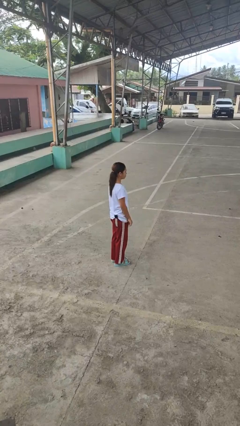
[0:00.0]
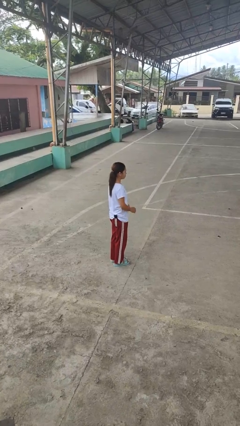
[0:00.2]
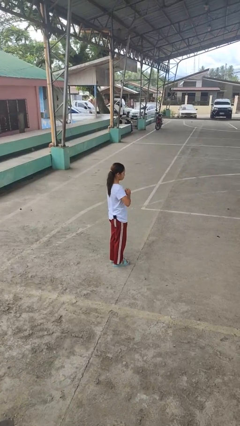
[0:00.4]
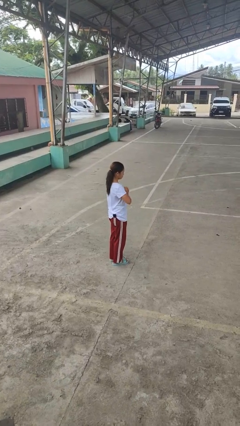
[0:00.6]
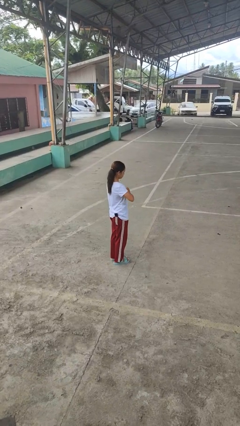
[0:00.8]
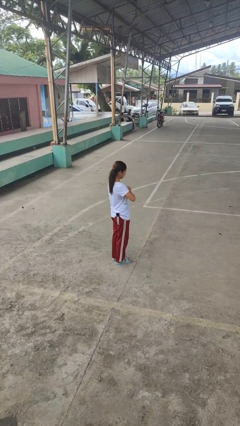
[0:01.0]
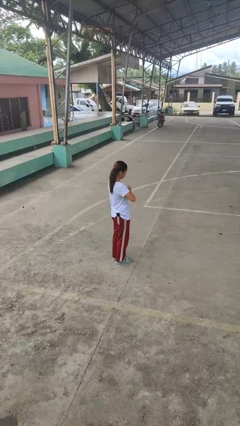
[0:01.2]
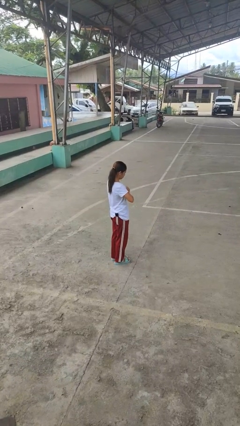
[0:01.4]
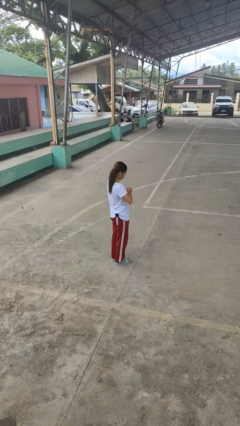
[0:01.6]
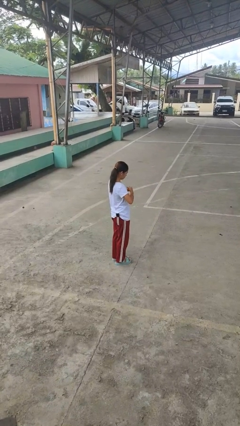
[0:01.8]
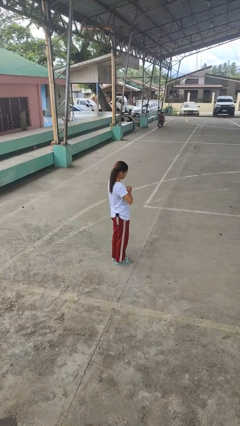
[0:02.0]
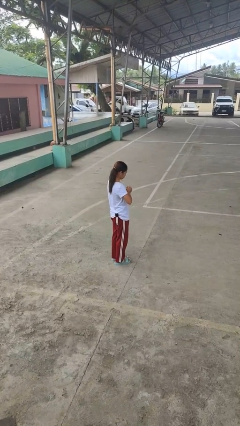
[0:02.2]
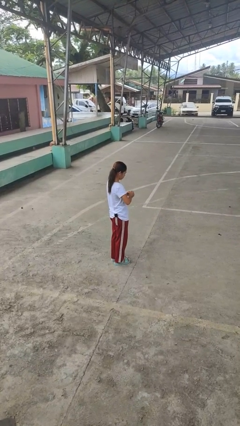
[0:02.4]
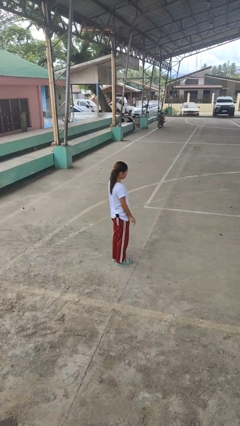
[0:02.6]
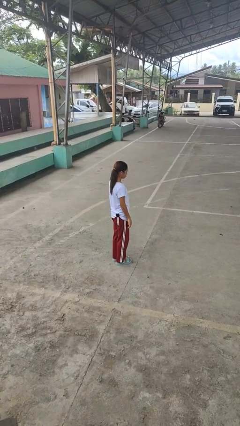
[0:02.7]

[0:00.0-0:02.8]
person cracks knuckles

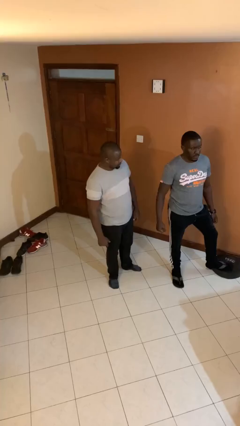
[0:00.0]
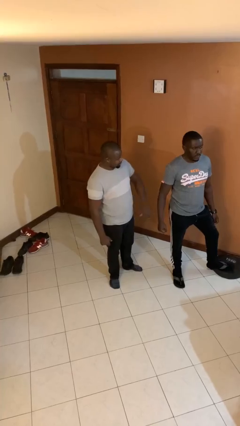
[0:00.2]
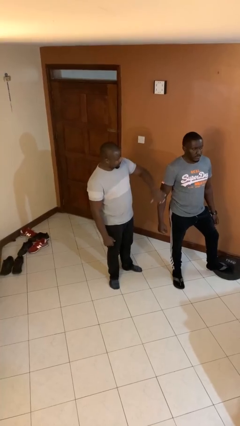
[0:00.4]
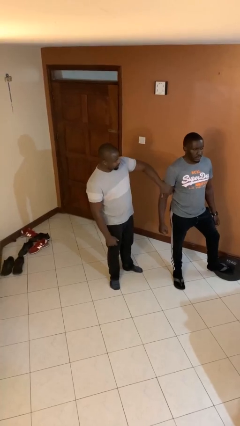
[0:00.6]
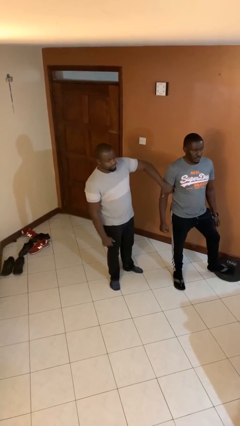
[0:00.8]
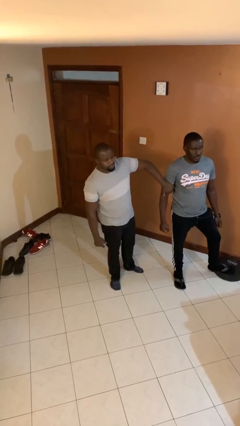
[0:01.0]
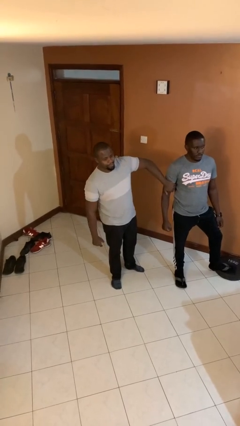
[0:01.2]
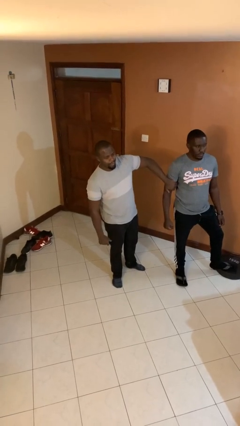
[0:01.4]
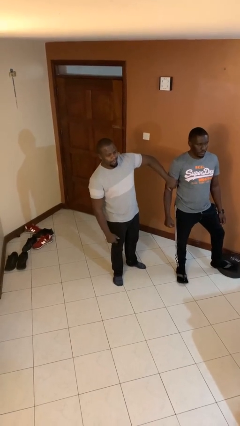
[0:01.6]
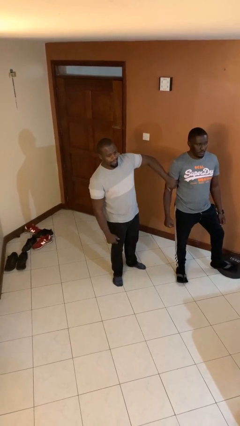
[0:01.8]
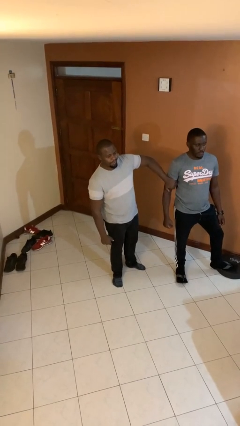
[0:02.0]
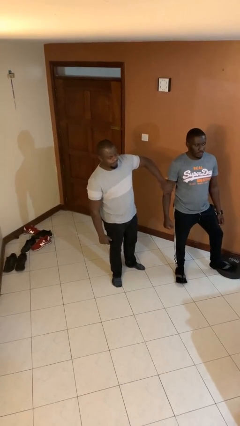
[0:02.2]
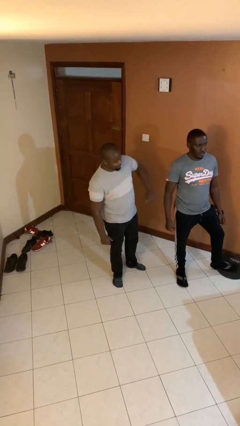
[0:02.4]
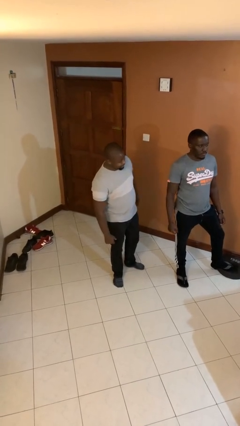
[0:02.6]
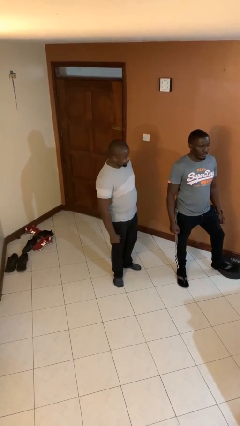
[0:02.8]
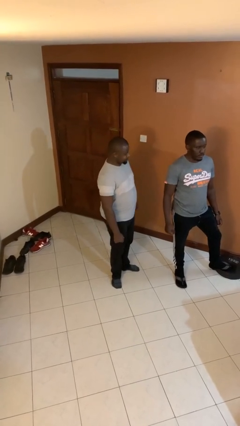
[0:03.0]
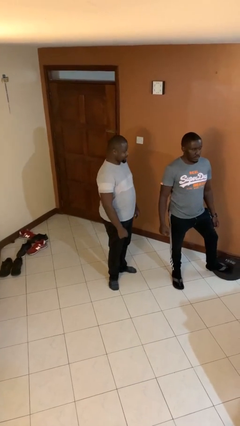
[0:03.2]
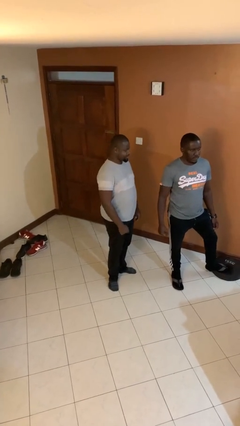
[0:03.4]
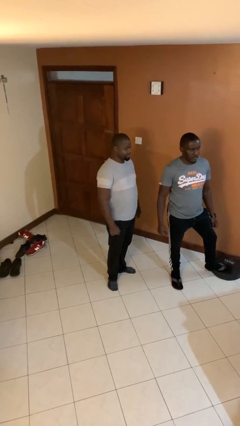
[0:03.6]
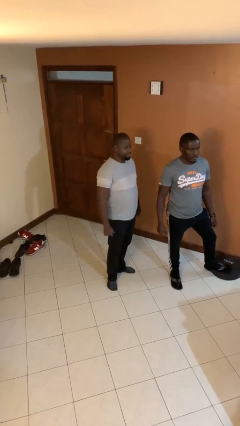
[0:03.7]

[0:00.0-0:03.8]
person grabs person by bicep

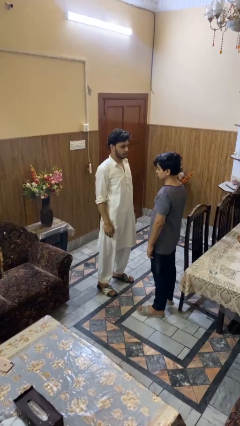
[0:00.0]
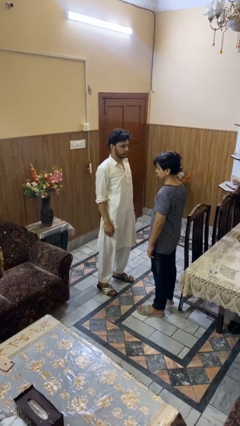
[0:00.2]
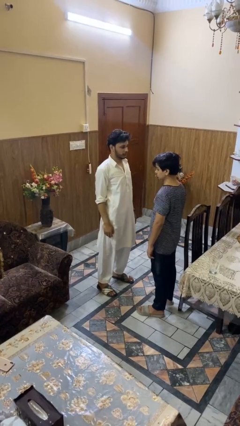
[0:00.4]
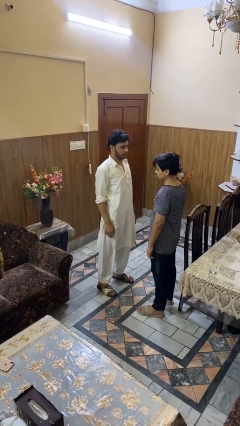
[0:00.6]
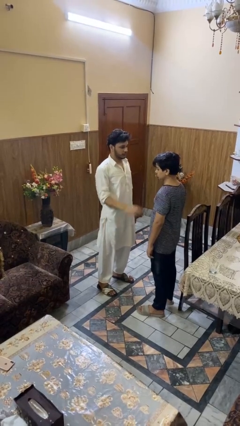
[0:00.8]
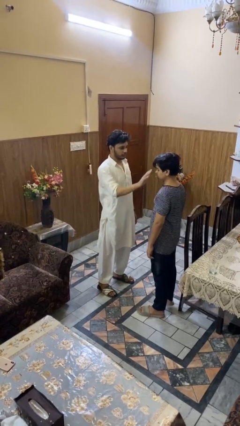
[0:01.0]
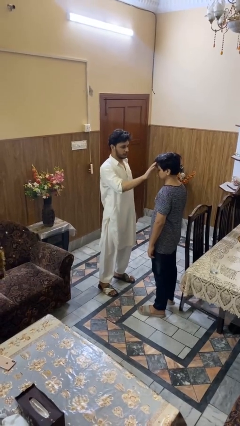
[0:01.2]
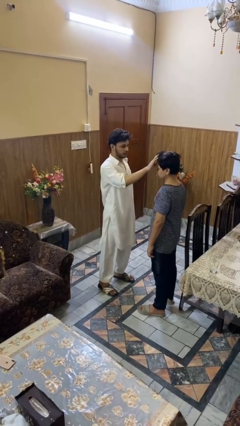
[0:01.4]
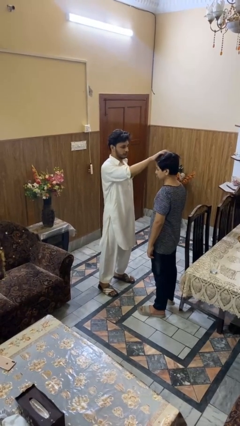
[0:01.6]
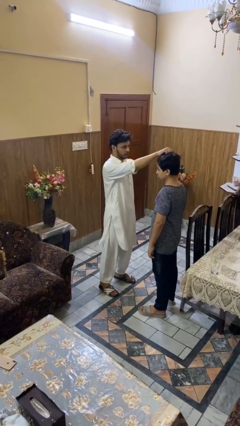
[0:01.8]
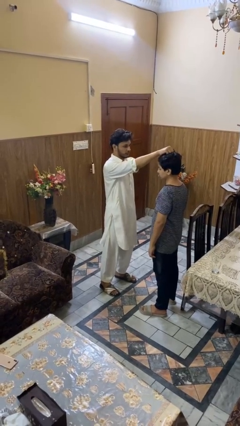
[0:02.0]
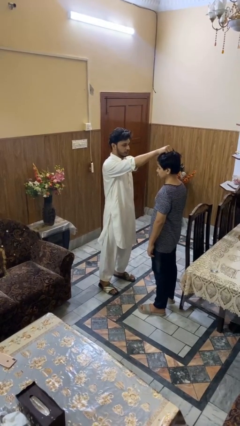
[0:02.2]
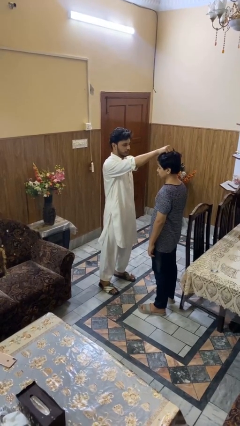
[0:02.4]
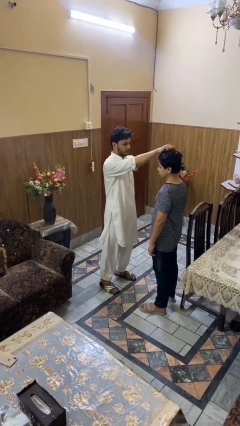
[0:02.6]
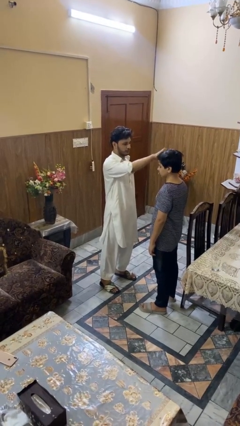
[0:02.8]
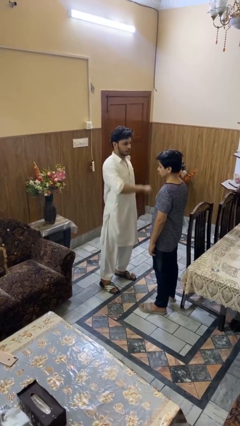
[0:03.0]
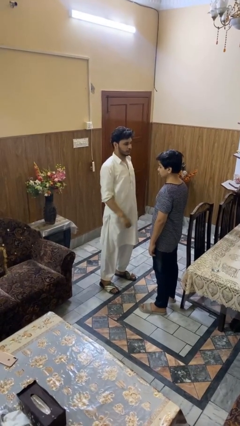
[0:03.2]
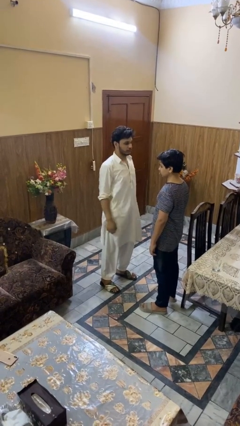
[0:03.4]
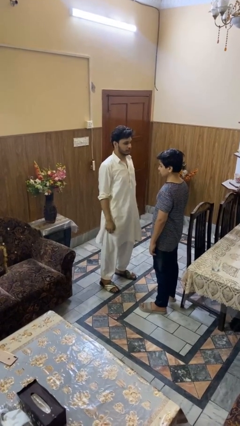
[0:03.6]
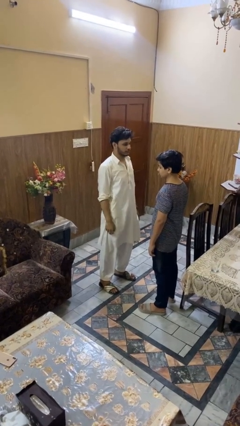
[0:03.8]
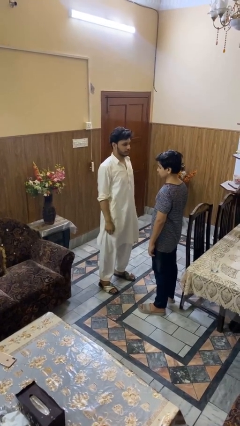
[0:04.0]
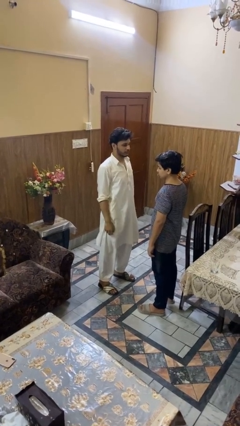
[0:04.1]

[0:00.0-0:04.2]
person grabs person by hair

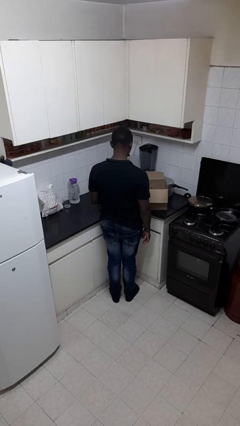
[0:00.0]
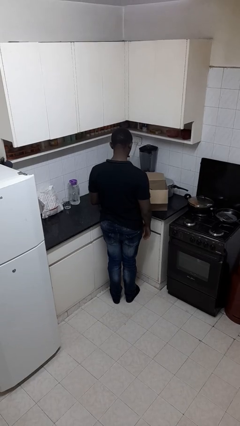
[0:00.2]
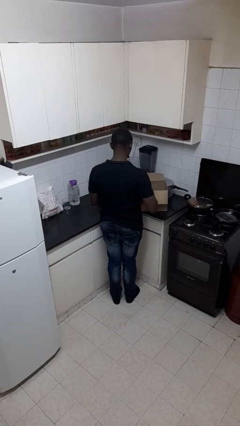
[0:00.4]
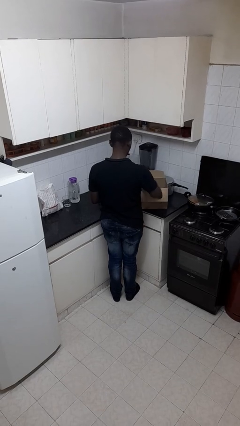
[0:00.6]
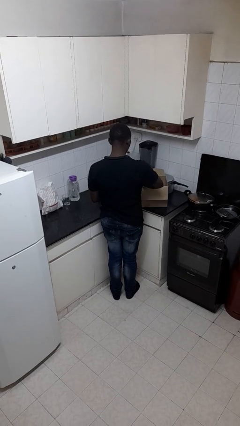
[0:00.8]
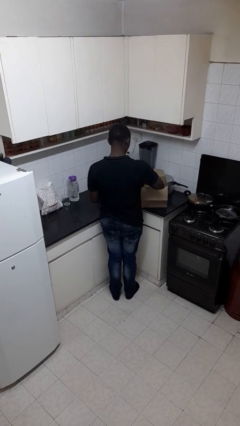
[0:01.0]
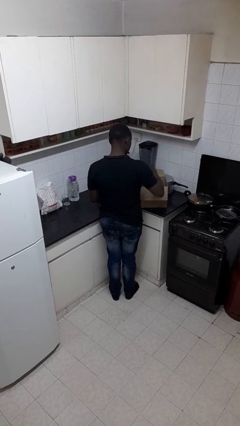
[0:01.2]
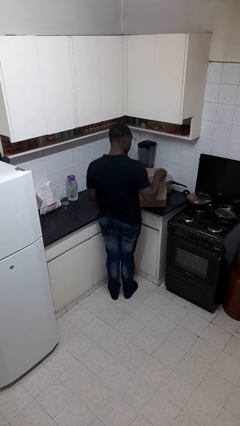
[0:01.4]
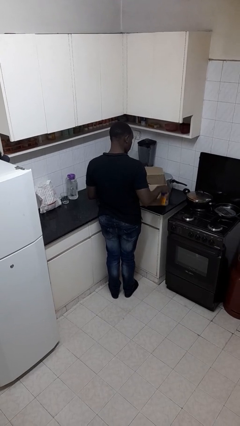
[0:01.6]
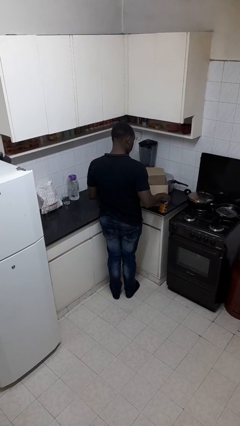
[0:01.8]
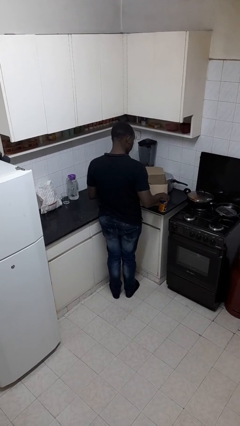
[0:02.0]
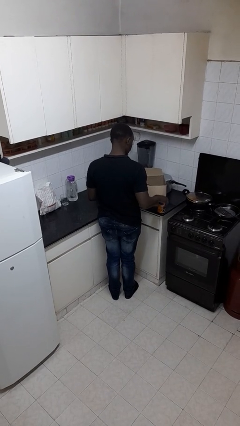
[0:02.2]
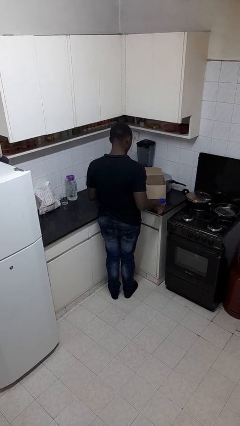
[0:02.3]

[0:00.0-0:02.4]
person takes object from box

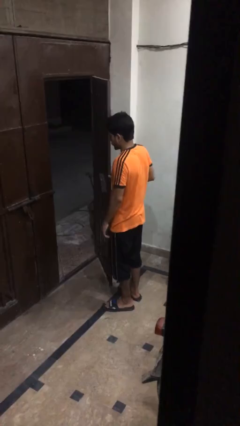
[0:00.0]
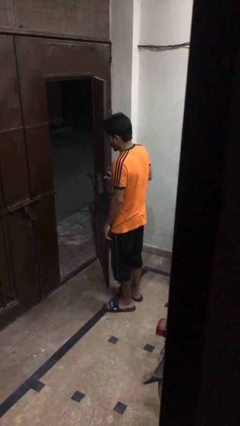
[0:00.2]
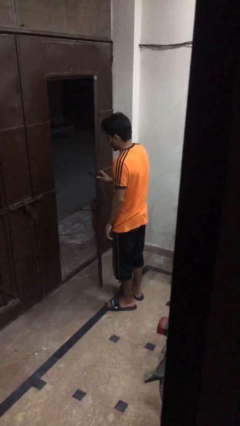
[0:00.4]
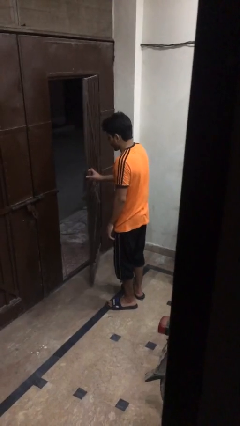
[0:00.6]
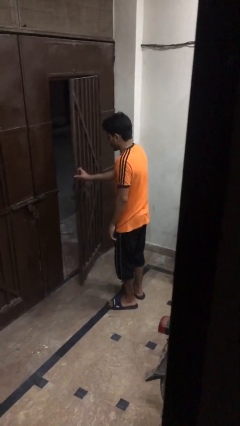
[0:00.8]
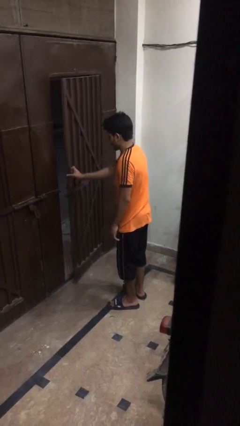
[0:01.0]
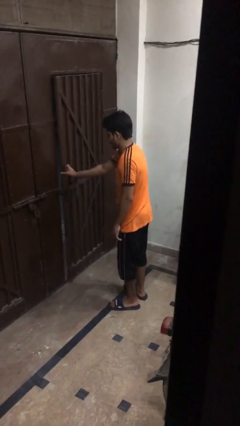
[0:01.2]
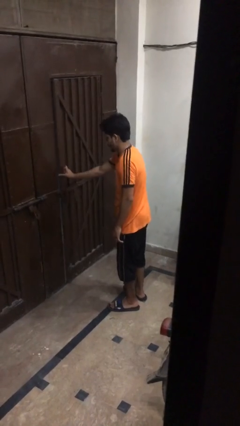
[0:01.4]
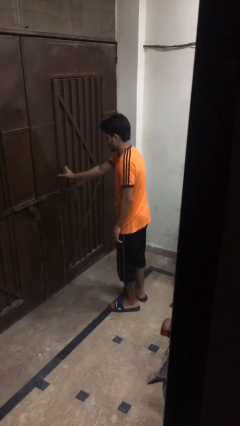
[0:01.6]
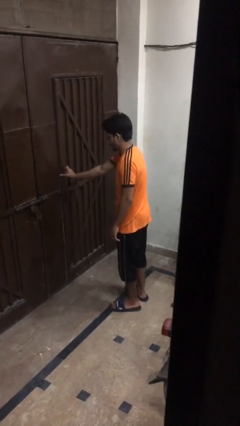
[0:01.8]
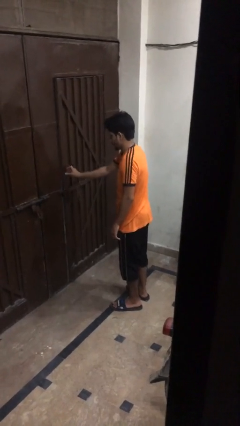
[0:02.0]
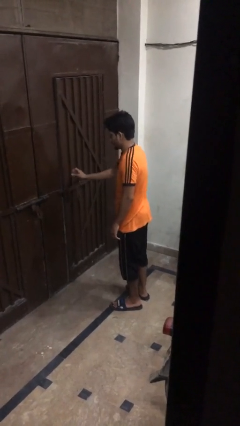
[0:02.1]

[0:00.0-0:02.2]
person closes gate

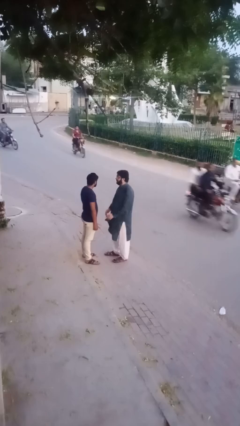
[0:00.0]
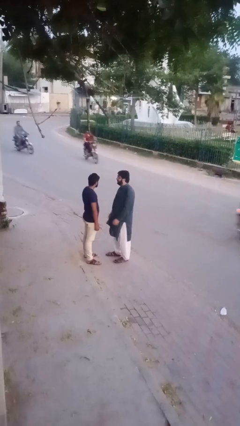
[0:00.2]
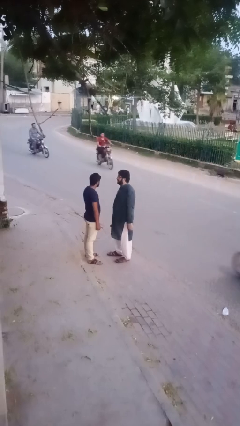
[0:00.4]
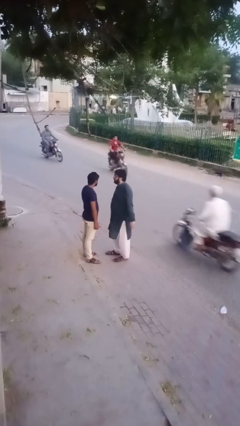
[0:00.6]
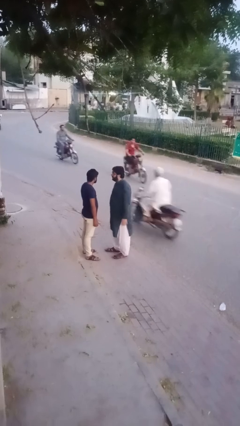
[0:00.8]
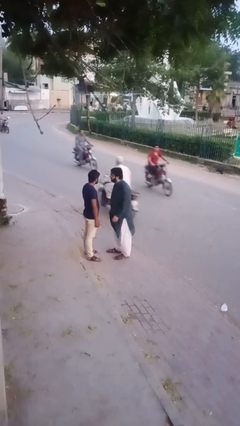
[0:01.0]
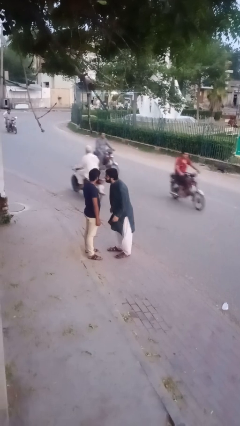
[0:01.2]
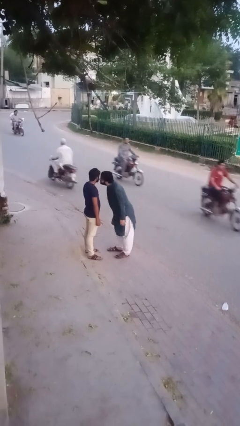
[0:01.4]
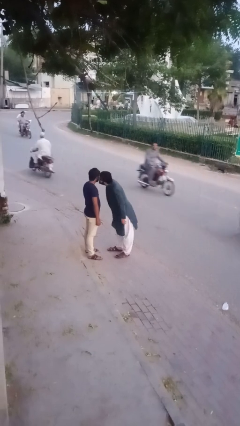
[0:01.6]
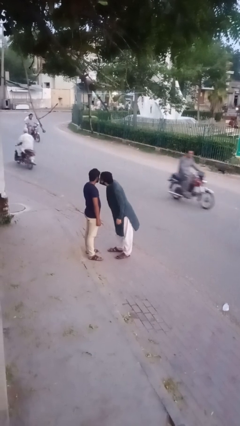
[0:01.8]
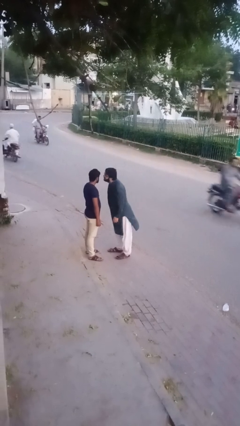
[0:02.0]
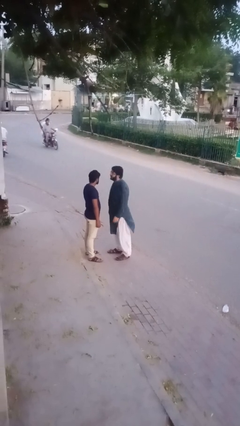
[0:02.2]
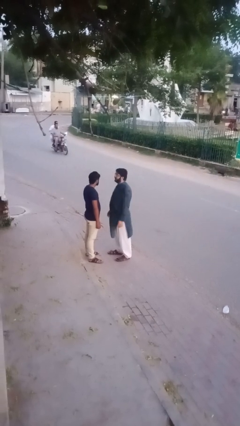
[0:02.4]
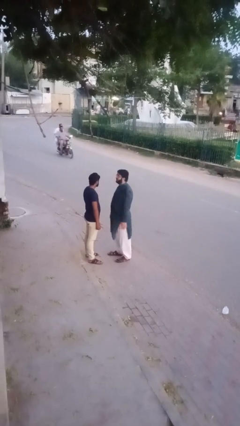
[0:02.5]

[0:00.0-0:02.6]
person kisses cheek of person
